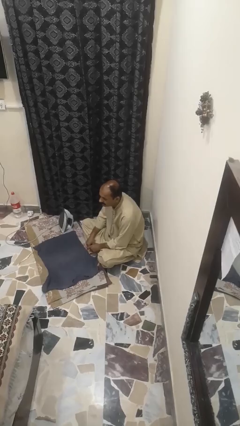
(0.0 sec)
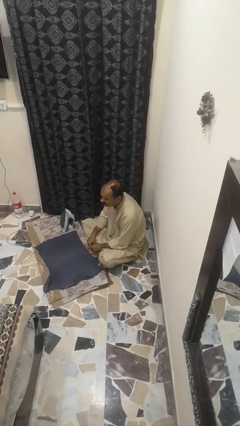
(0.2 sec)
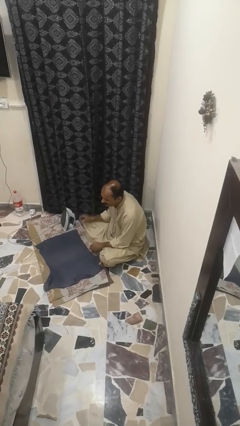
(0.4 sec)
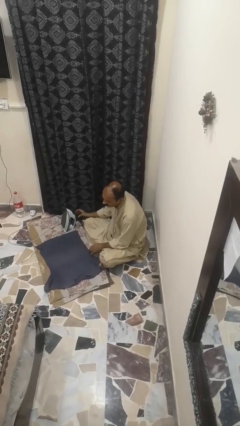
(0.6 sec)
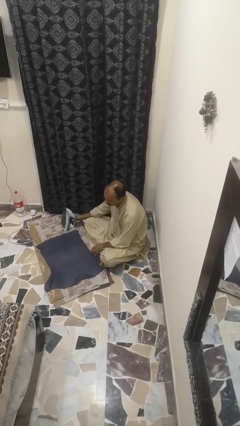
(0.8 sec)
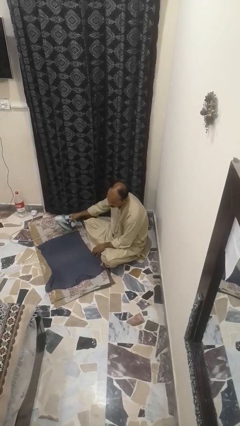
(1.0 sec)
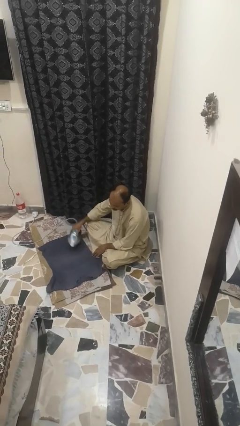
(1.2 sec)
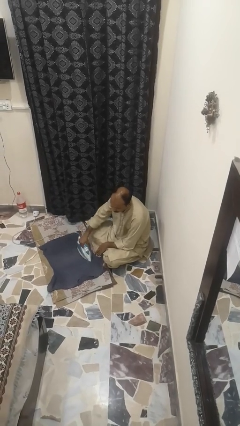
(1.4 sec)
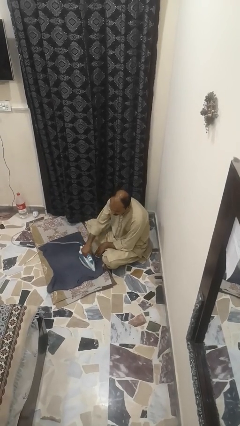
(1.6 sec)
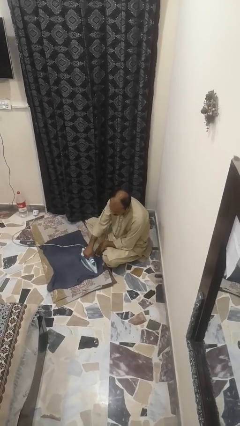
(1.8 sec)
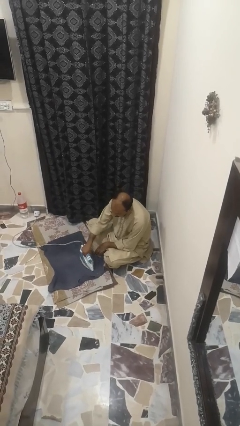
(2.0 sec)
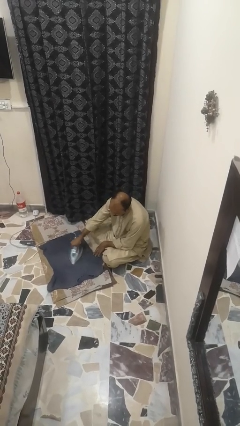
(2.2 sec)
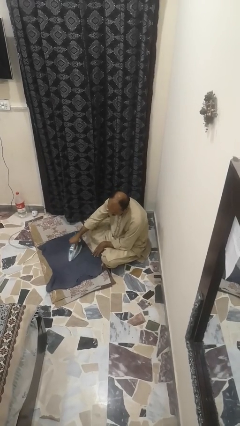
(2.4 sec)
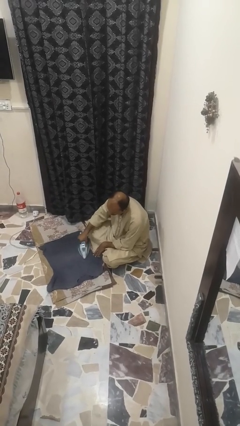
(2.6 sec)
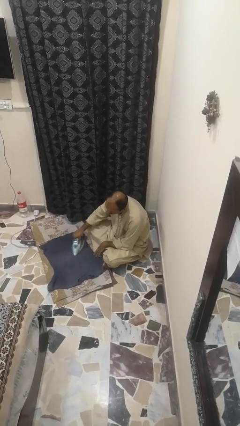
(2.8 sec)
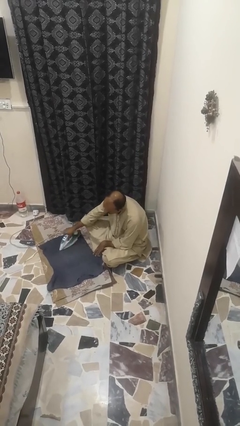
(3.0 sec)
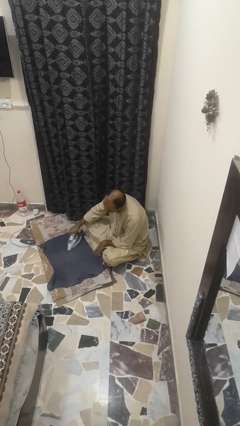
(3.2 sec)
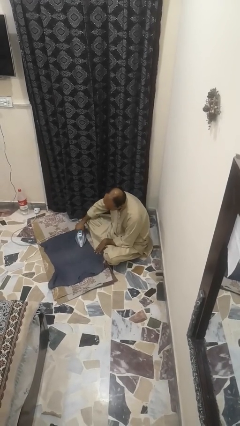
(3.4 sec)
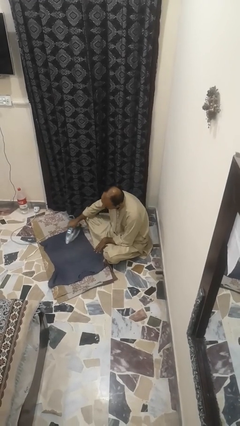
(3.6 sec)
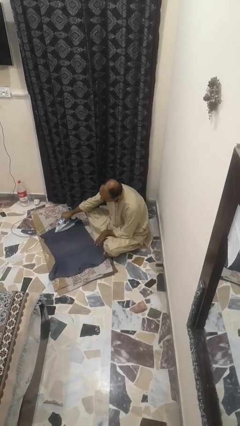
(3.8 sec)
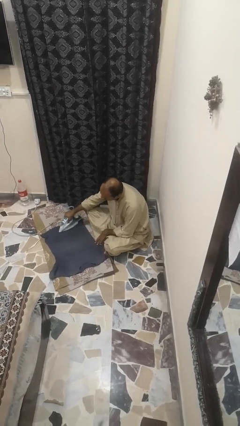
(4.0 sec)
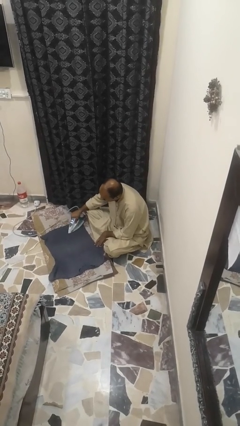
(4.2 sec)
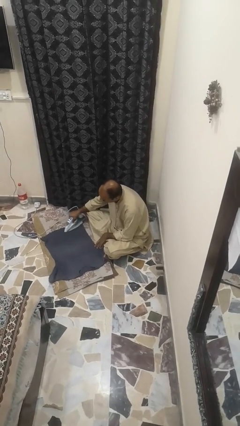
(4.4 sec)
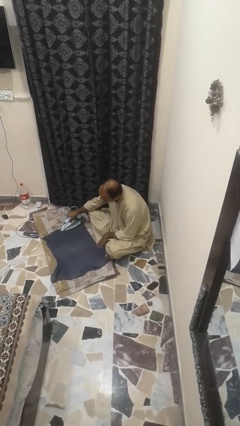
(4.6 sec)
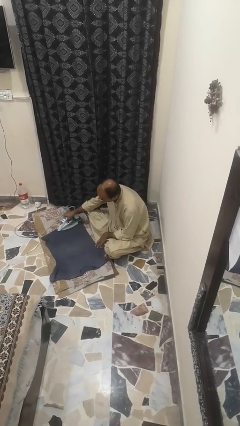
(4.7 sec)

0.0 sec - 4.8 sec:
person irons clothes

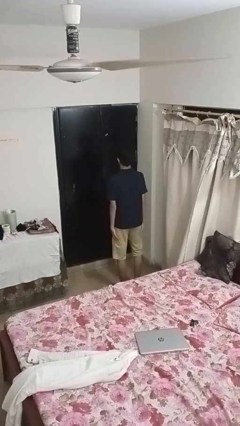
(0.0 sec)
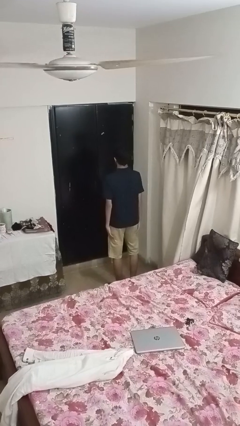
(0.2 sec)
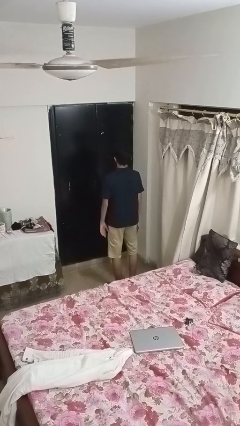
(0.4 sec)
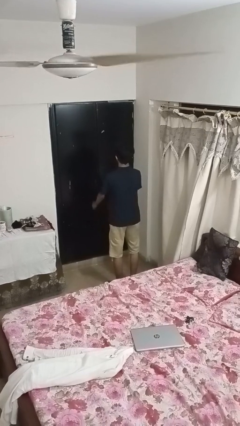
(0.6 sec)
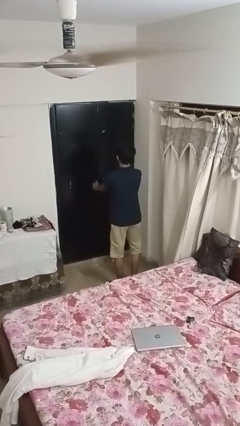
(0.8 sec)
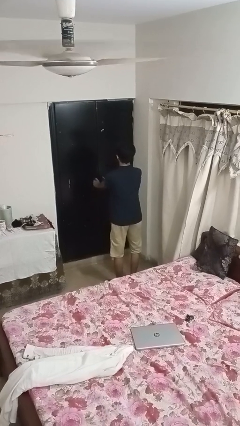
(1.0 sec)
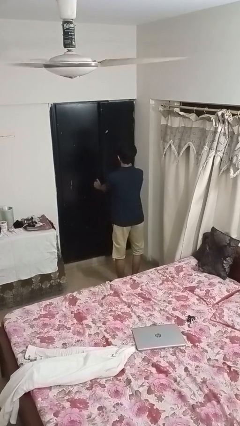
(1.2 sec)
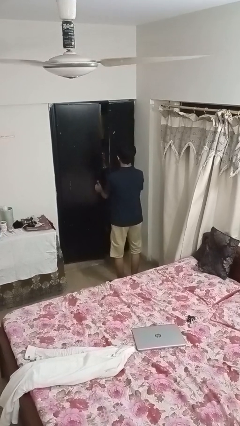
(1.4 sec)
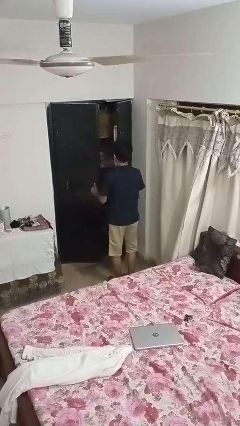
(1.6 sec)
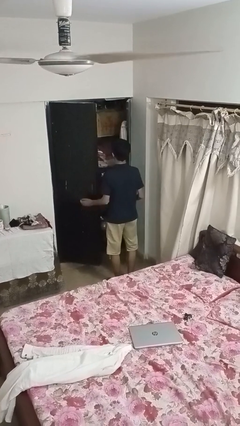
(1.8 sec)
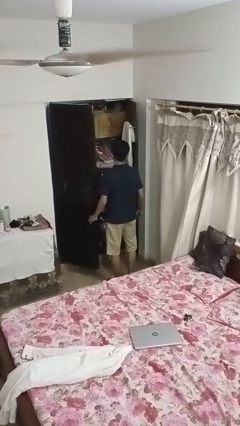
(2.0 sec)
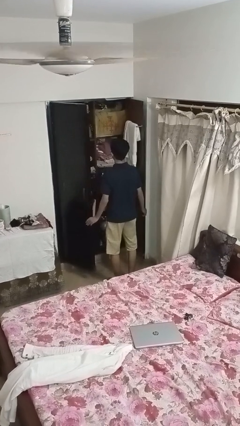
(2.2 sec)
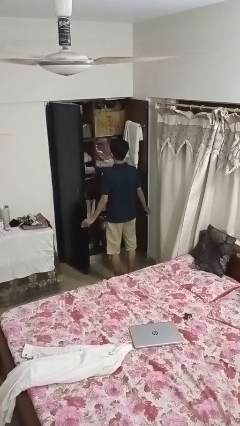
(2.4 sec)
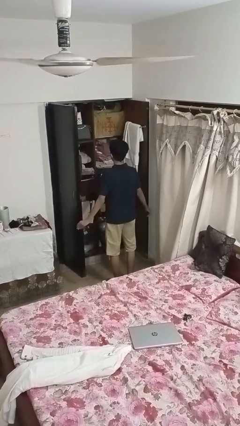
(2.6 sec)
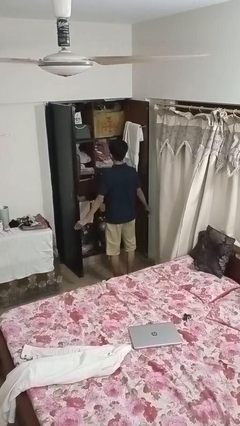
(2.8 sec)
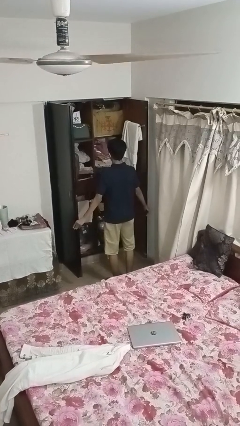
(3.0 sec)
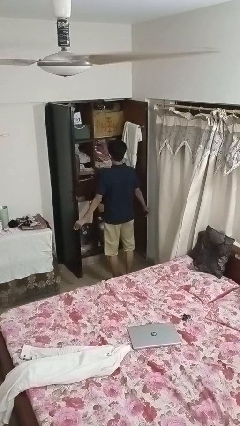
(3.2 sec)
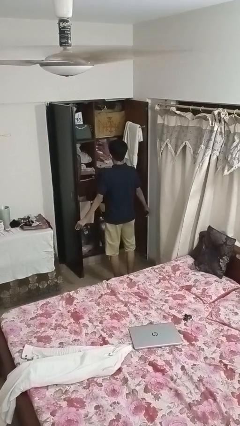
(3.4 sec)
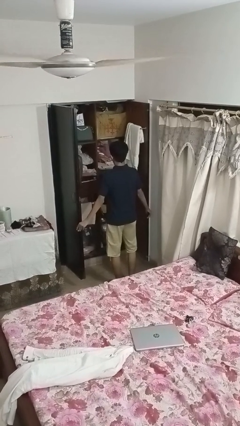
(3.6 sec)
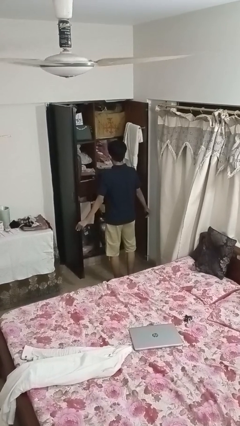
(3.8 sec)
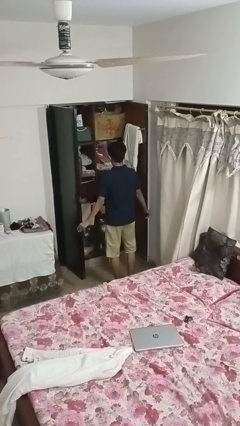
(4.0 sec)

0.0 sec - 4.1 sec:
person opens closet door

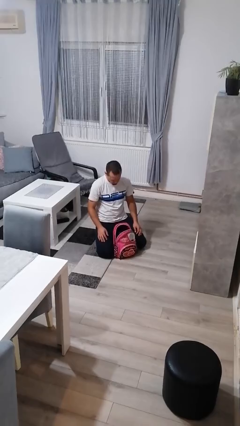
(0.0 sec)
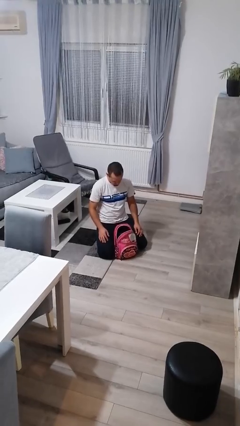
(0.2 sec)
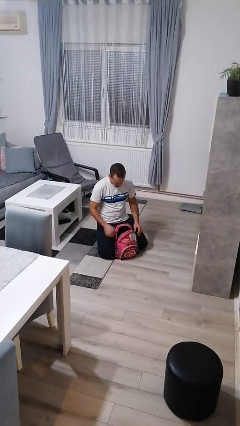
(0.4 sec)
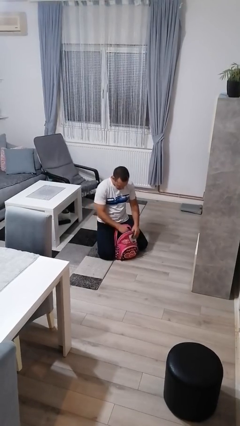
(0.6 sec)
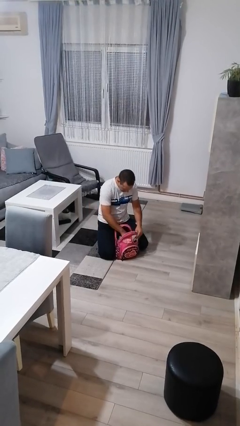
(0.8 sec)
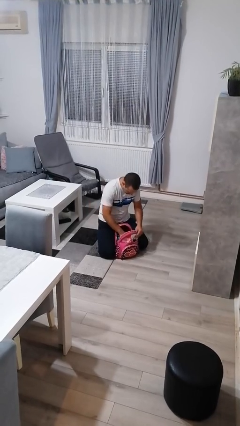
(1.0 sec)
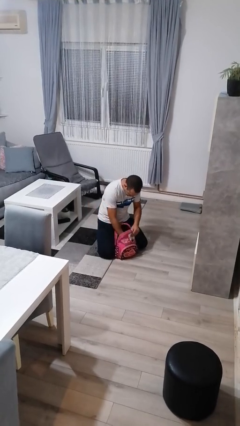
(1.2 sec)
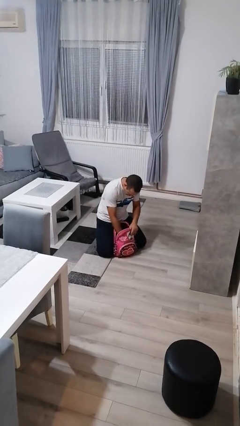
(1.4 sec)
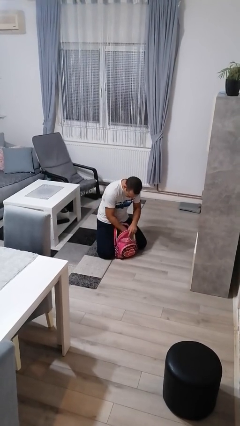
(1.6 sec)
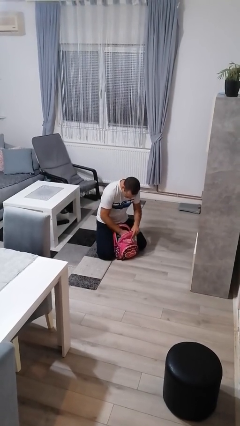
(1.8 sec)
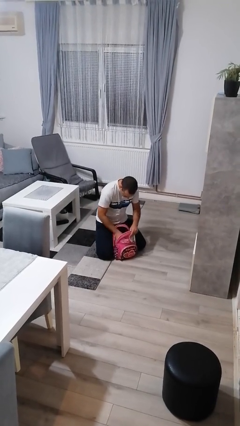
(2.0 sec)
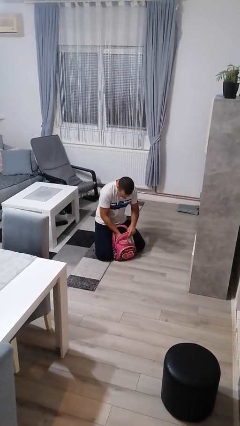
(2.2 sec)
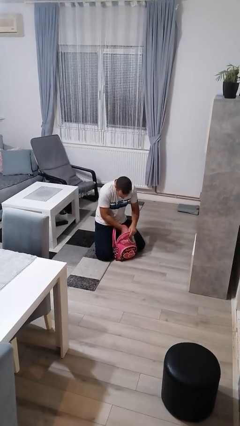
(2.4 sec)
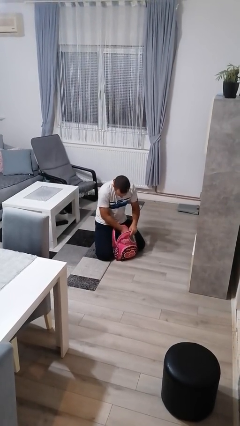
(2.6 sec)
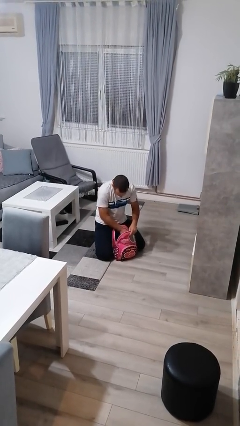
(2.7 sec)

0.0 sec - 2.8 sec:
person searches in bag

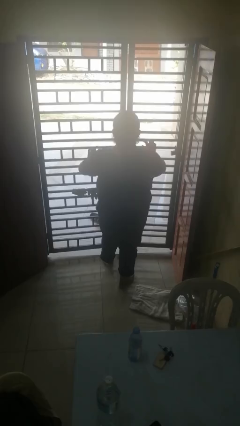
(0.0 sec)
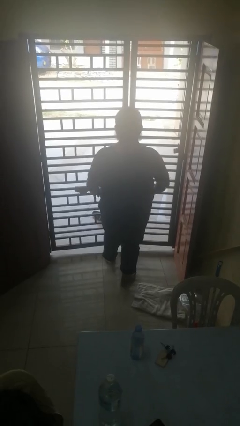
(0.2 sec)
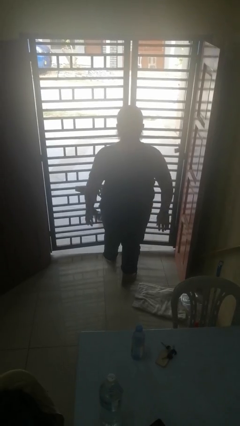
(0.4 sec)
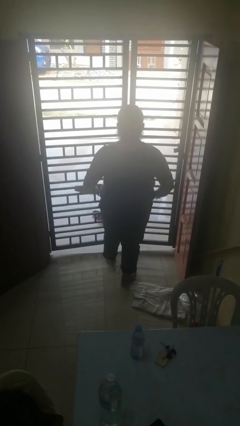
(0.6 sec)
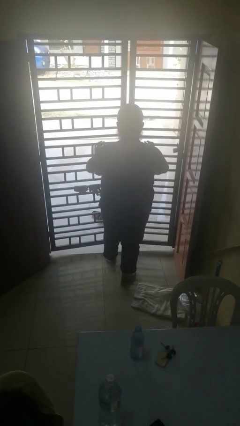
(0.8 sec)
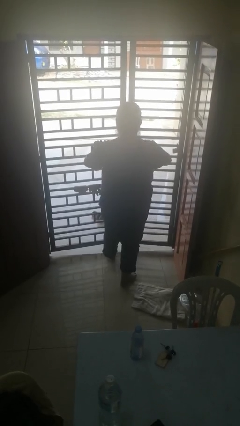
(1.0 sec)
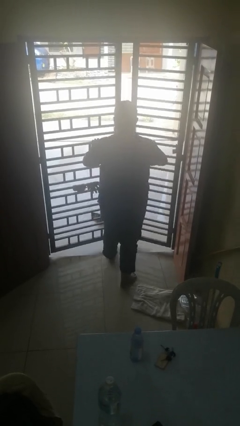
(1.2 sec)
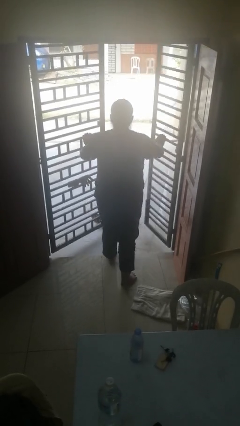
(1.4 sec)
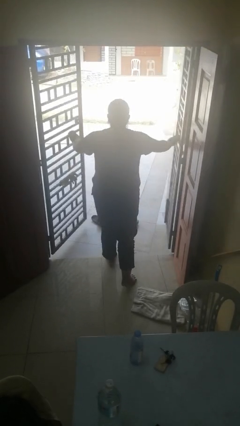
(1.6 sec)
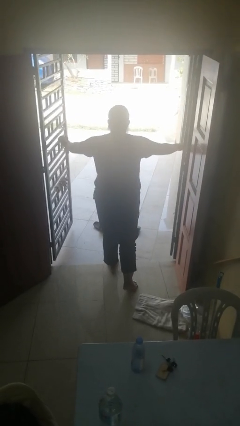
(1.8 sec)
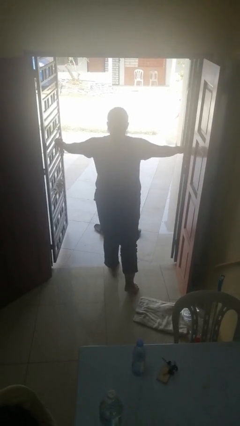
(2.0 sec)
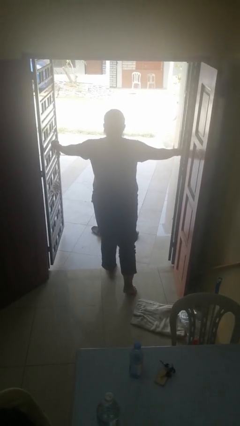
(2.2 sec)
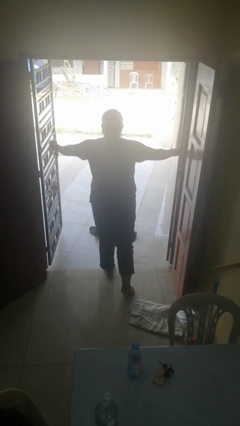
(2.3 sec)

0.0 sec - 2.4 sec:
person opens gate

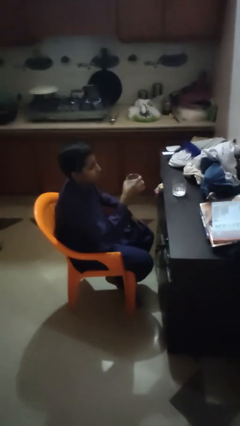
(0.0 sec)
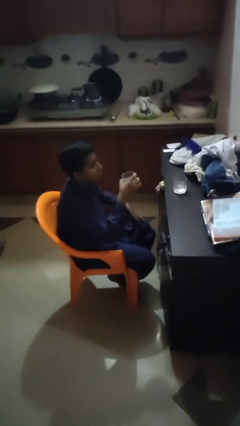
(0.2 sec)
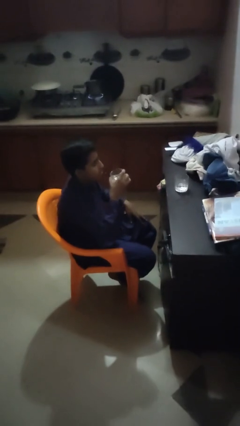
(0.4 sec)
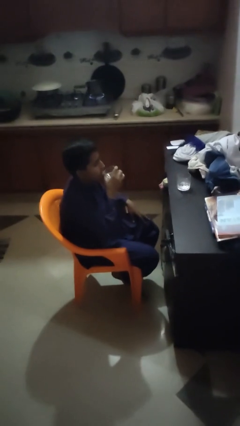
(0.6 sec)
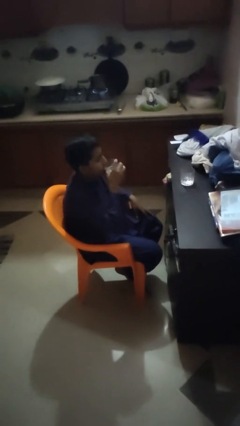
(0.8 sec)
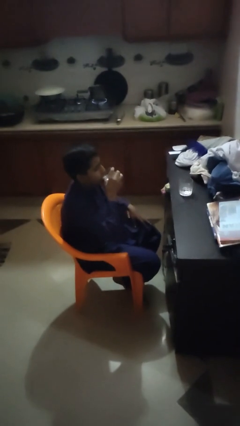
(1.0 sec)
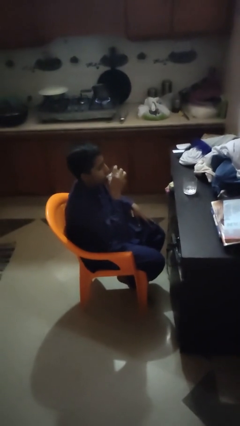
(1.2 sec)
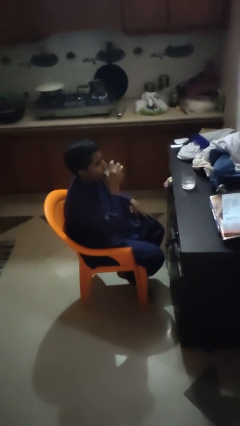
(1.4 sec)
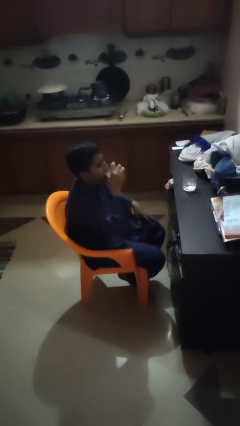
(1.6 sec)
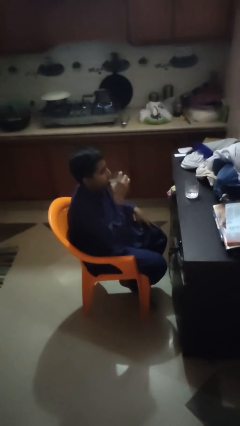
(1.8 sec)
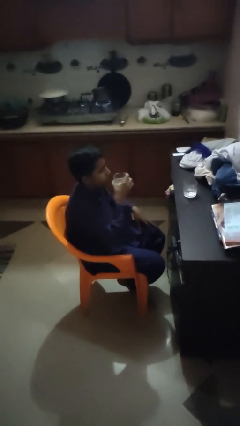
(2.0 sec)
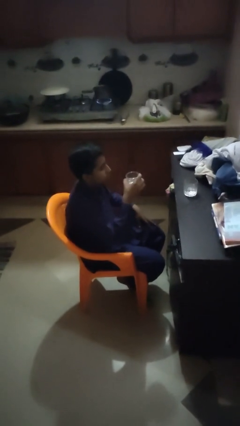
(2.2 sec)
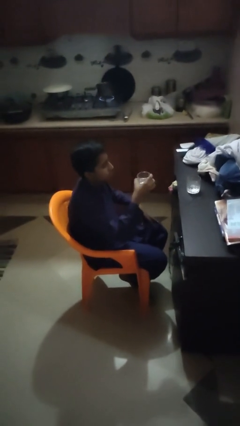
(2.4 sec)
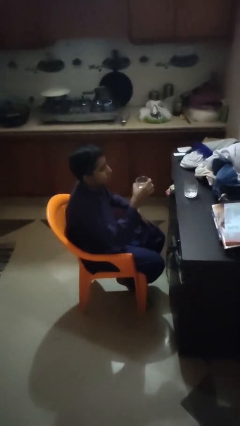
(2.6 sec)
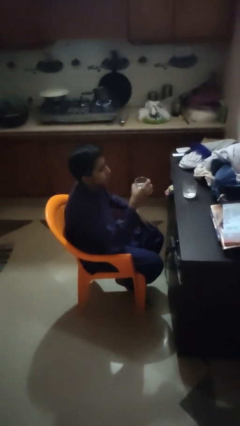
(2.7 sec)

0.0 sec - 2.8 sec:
person drinks from shotglass

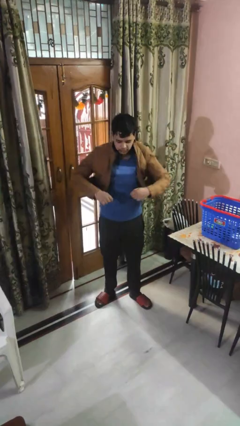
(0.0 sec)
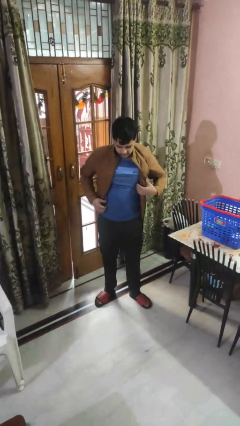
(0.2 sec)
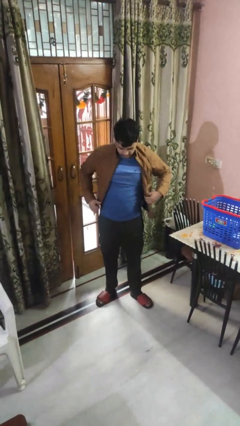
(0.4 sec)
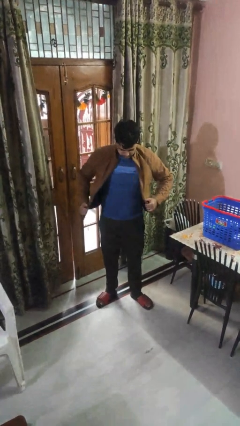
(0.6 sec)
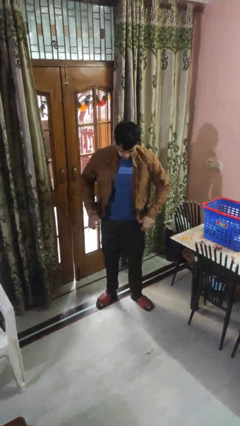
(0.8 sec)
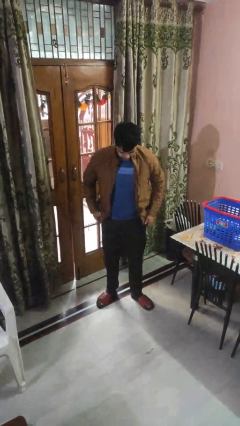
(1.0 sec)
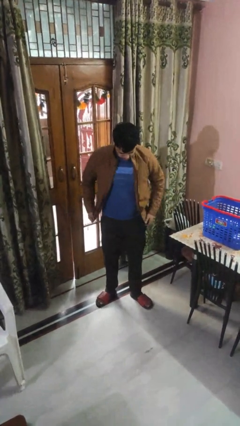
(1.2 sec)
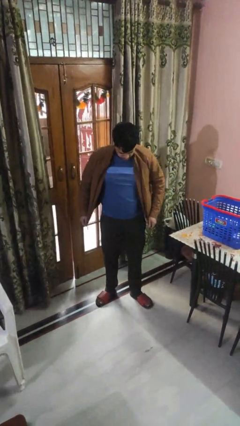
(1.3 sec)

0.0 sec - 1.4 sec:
person puts on jacket
